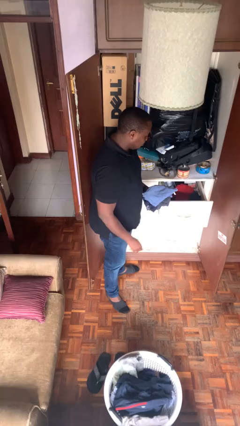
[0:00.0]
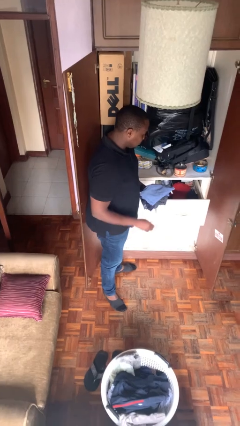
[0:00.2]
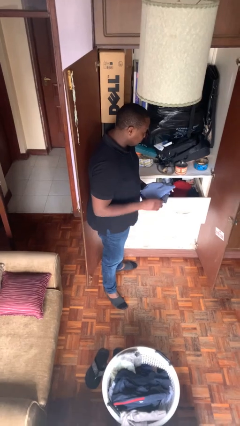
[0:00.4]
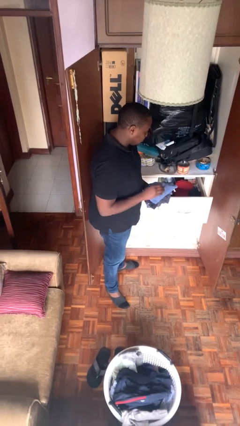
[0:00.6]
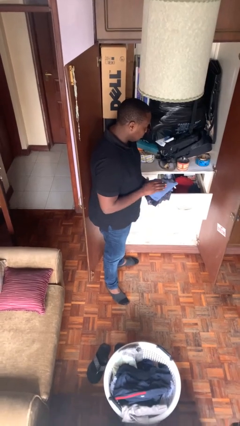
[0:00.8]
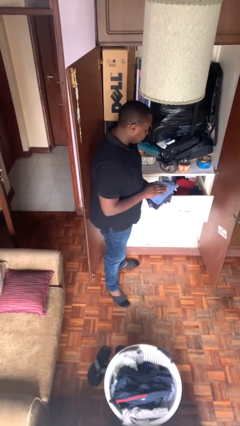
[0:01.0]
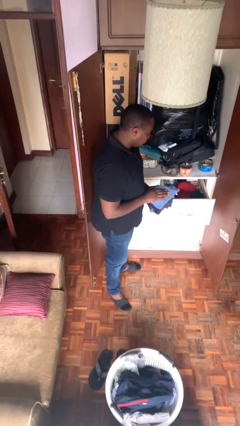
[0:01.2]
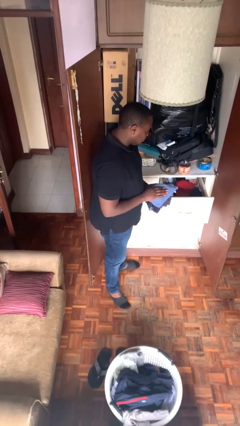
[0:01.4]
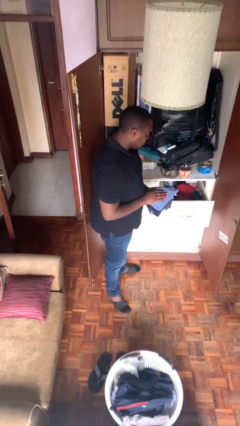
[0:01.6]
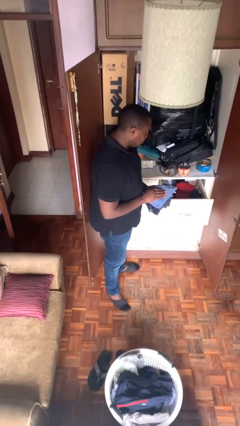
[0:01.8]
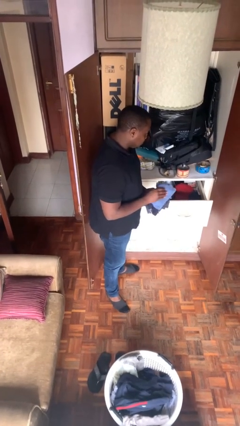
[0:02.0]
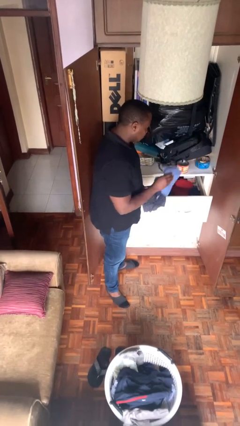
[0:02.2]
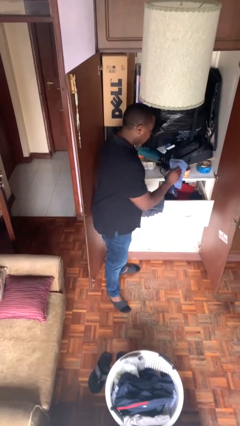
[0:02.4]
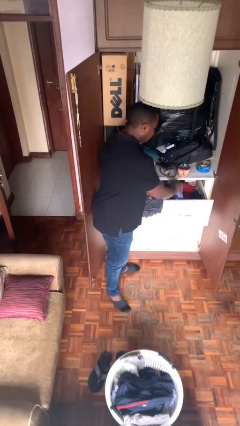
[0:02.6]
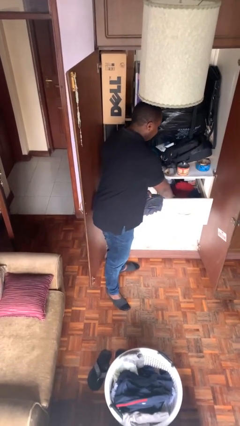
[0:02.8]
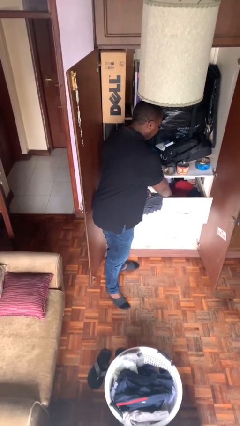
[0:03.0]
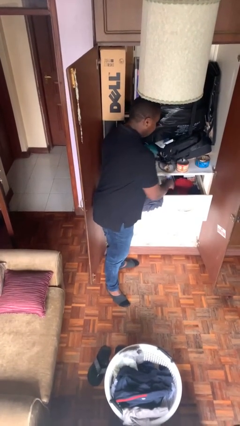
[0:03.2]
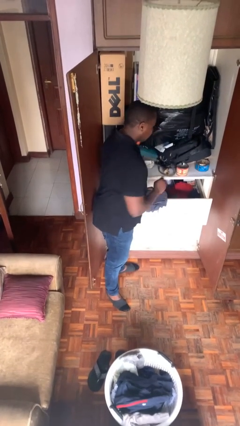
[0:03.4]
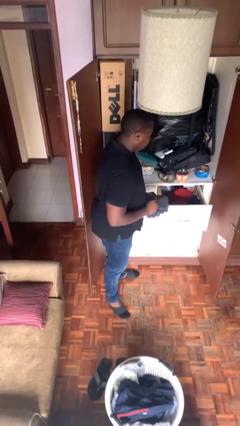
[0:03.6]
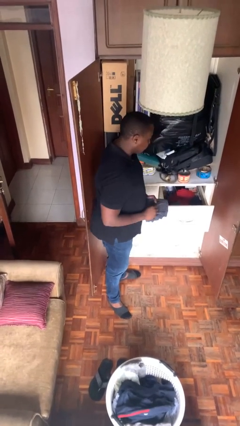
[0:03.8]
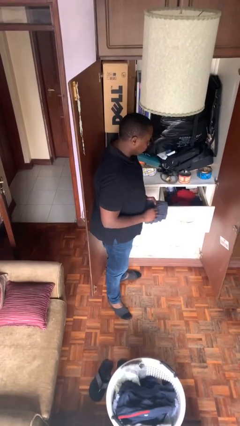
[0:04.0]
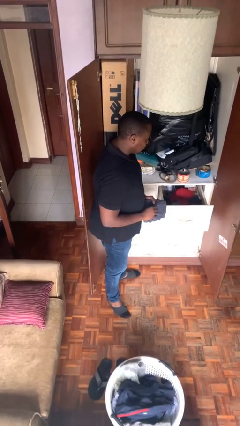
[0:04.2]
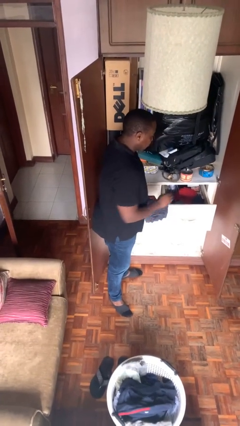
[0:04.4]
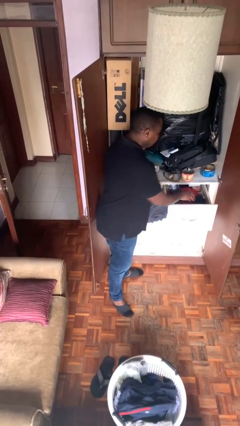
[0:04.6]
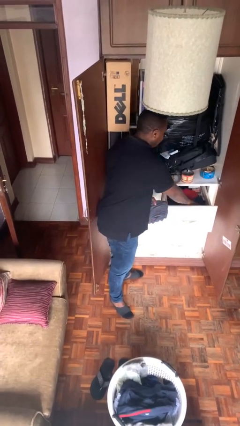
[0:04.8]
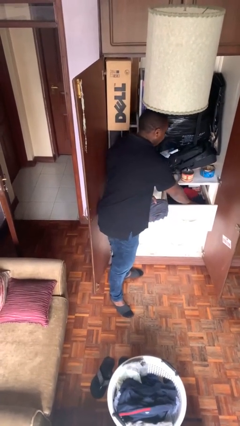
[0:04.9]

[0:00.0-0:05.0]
person puts clothes into dresser

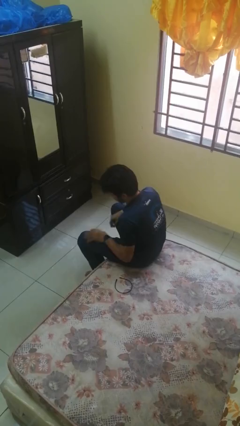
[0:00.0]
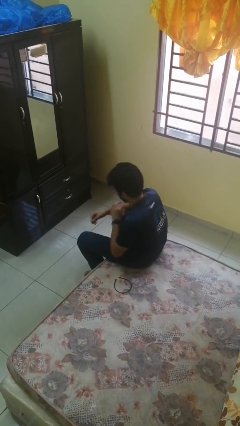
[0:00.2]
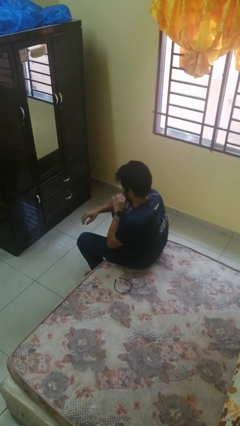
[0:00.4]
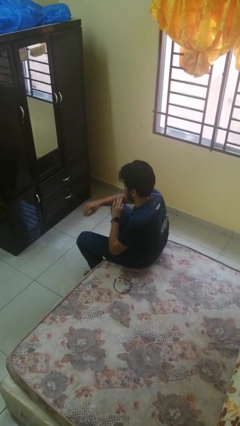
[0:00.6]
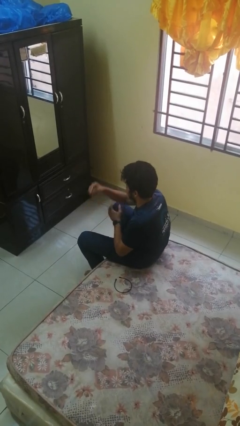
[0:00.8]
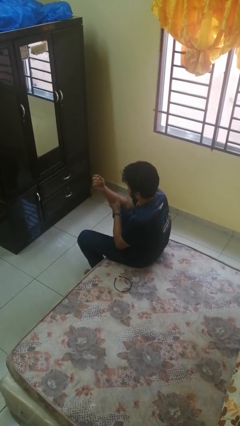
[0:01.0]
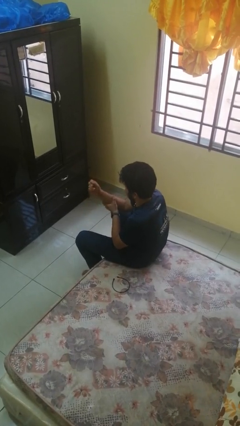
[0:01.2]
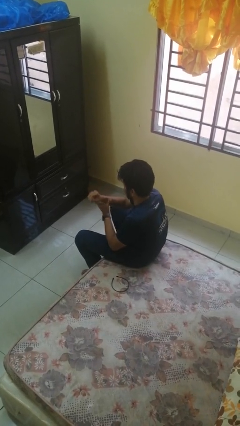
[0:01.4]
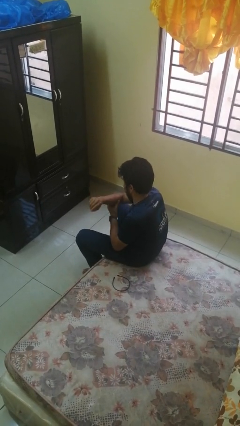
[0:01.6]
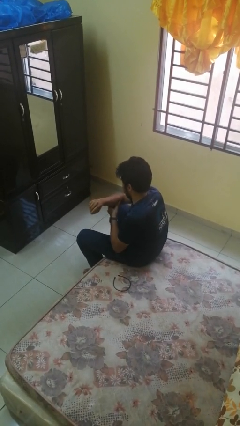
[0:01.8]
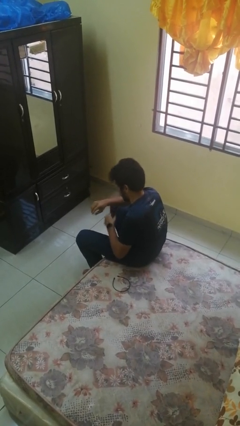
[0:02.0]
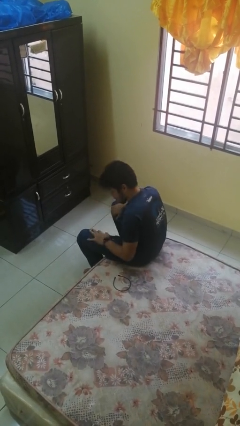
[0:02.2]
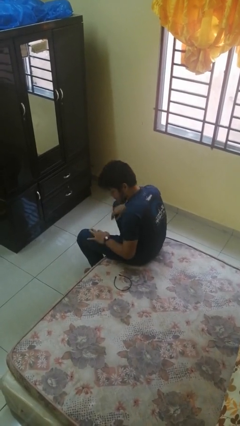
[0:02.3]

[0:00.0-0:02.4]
person looks at hands in lap

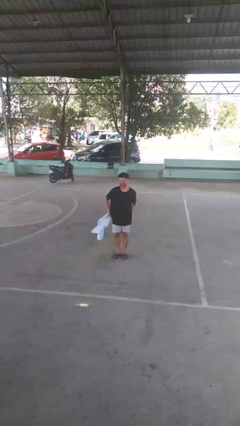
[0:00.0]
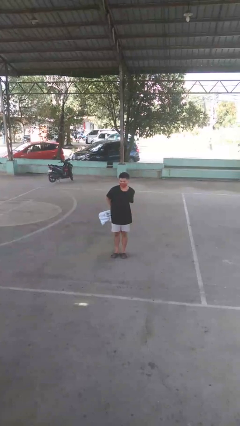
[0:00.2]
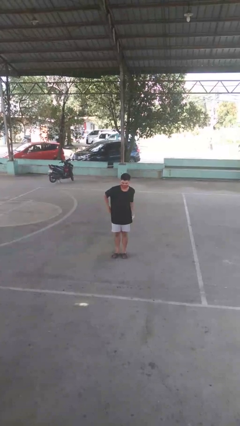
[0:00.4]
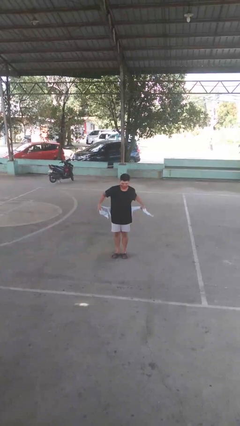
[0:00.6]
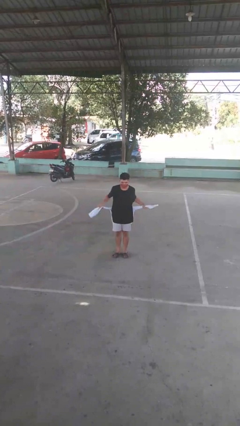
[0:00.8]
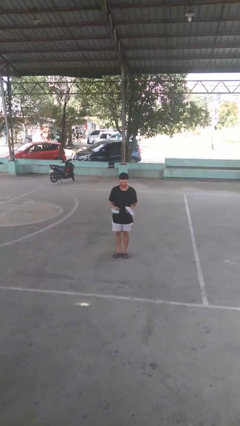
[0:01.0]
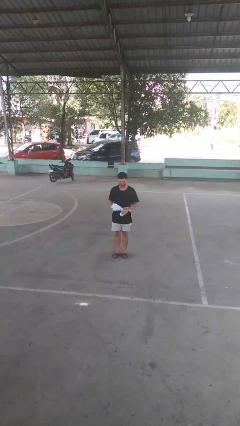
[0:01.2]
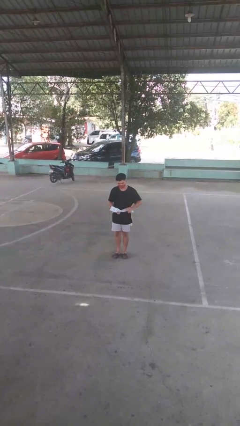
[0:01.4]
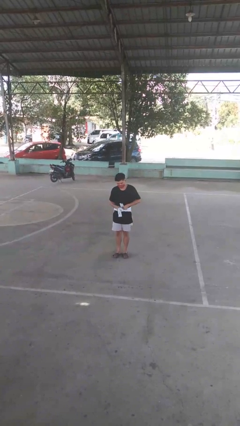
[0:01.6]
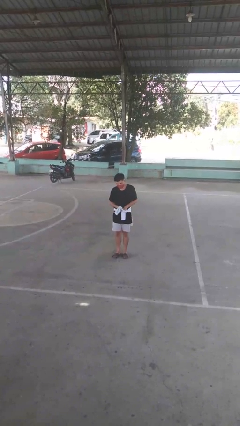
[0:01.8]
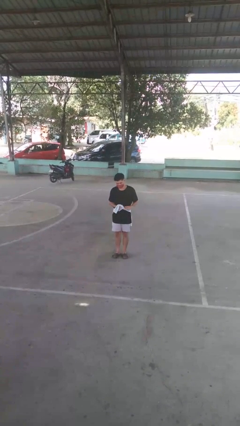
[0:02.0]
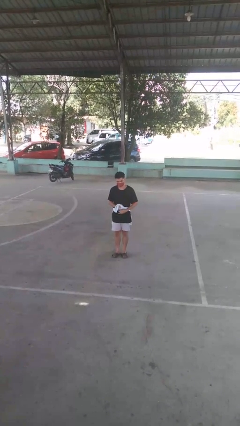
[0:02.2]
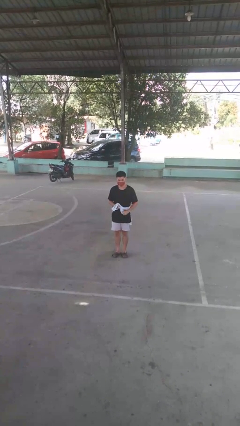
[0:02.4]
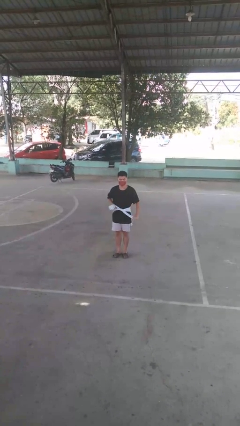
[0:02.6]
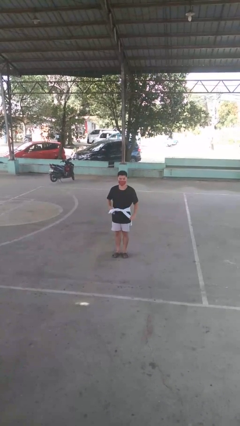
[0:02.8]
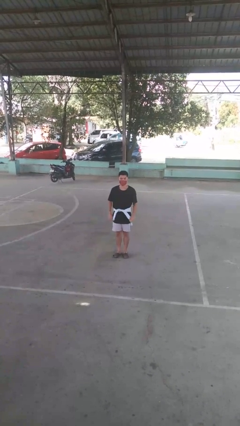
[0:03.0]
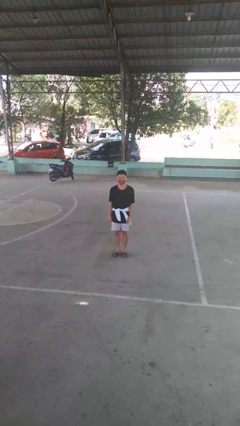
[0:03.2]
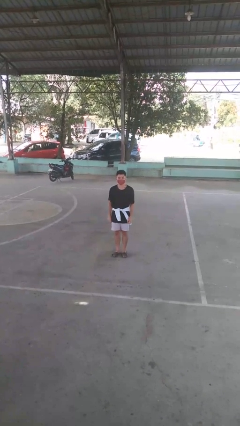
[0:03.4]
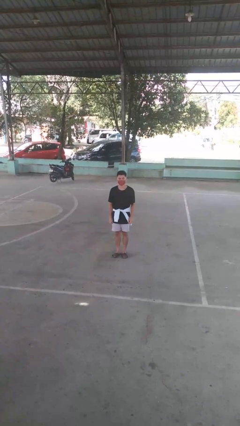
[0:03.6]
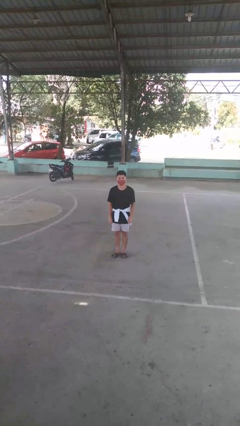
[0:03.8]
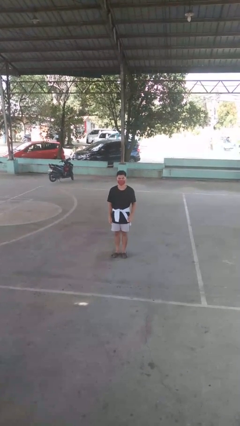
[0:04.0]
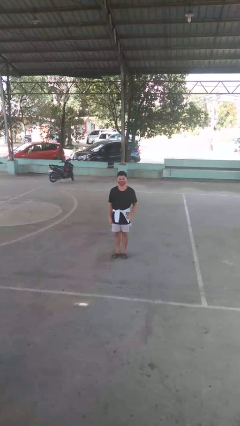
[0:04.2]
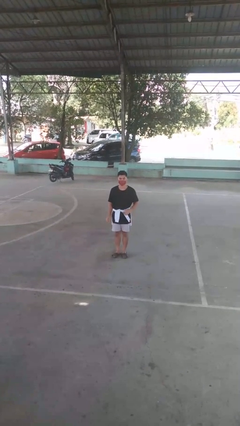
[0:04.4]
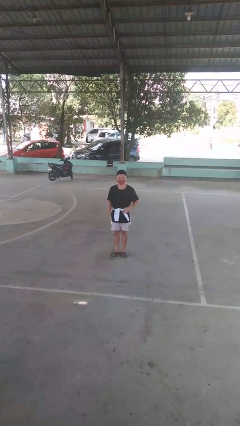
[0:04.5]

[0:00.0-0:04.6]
person ties jacket around waist

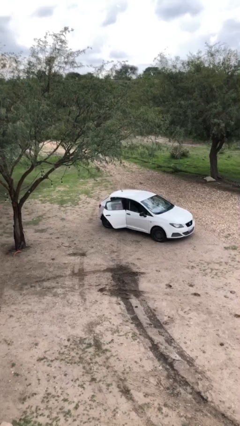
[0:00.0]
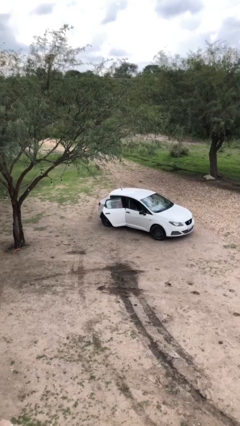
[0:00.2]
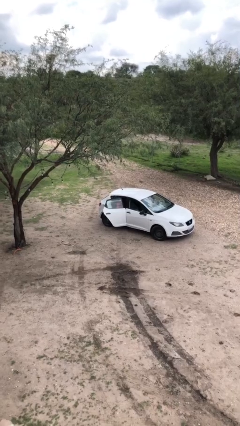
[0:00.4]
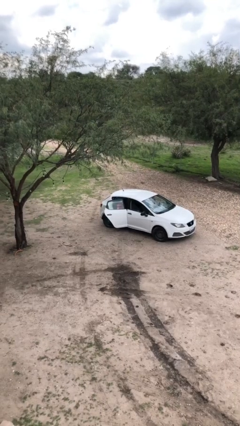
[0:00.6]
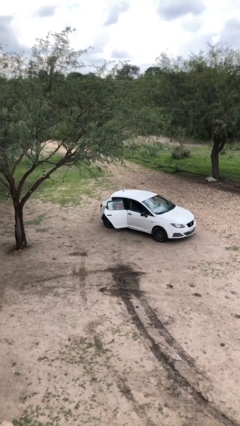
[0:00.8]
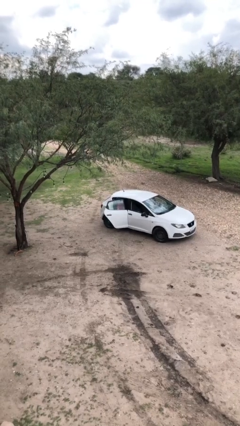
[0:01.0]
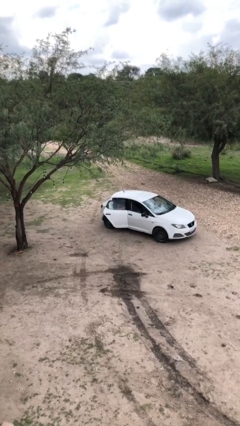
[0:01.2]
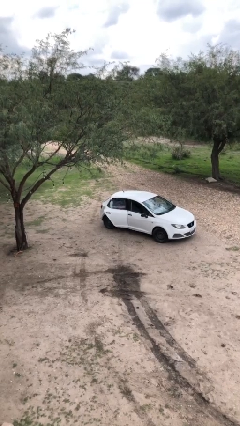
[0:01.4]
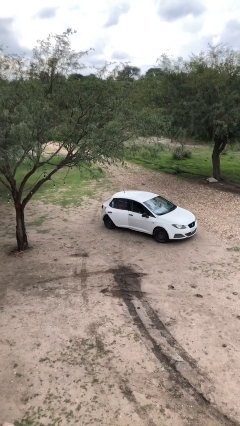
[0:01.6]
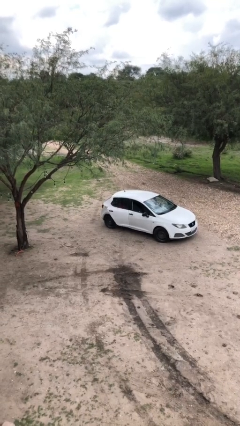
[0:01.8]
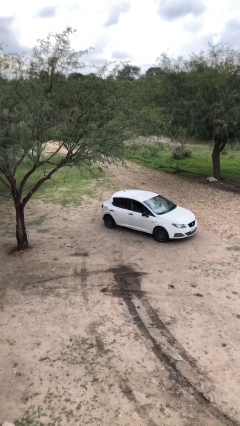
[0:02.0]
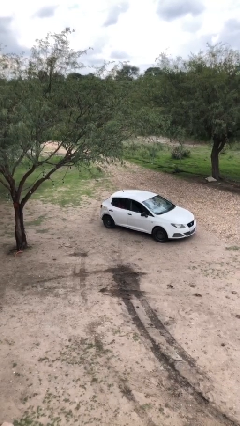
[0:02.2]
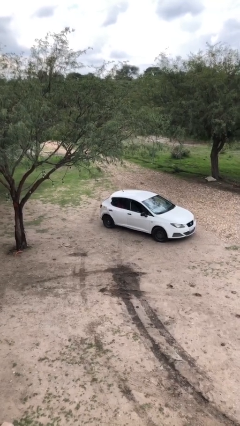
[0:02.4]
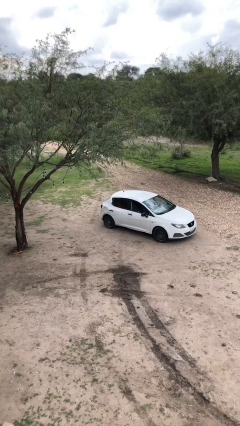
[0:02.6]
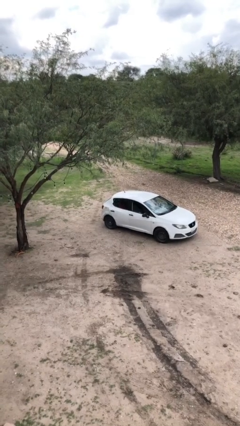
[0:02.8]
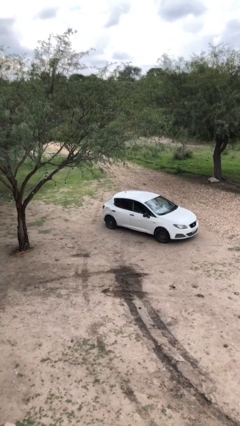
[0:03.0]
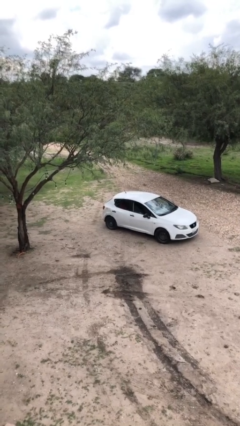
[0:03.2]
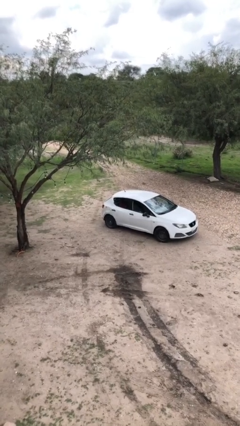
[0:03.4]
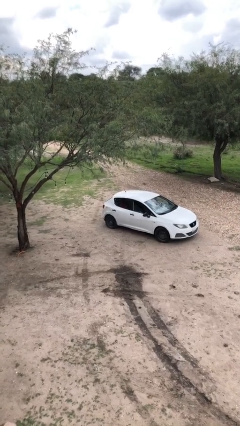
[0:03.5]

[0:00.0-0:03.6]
person closes car door

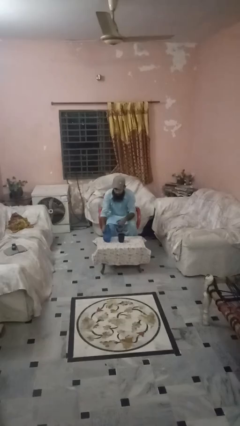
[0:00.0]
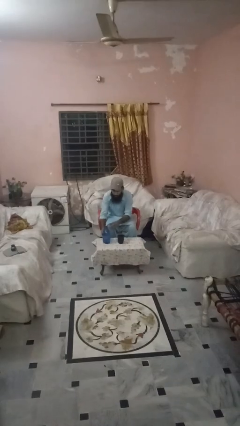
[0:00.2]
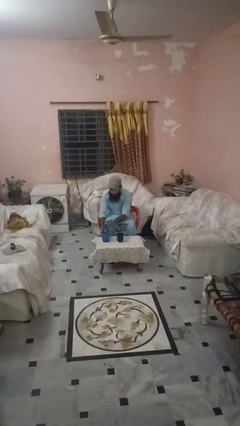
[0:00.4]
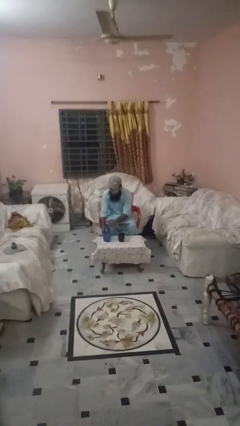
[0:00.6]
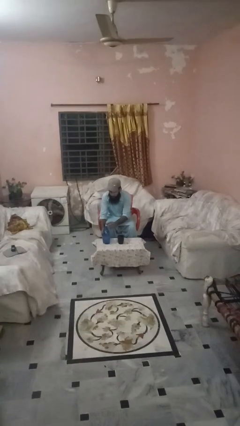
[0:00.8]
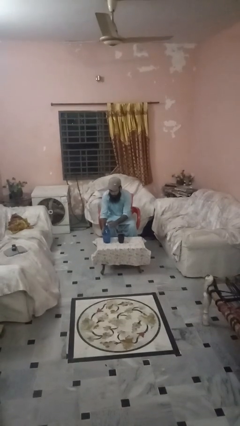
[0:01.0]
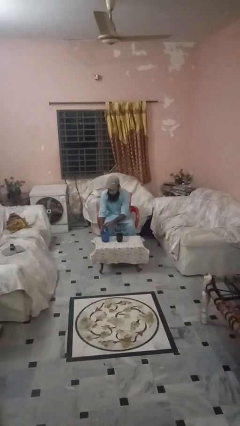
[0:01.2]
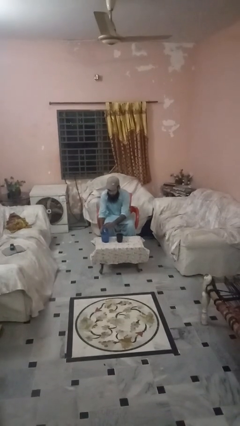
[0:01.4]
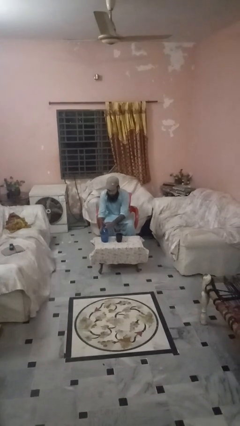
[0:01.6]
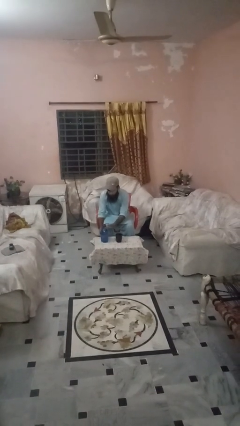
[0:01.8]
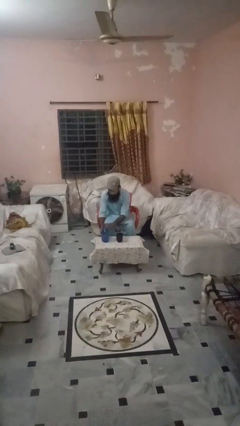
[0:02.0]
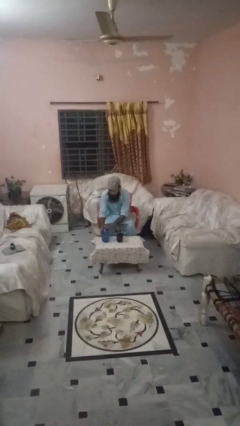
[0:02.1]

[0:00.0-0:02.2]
person screws lid to bottle
